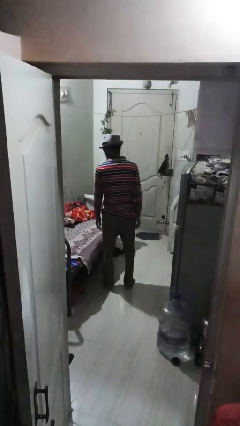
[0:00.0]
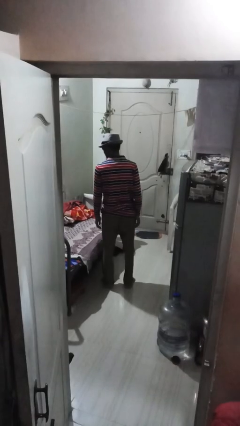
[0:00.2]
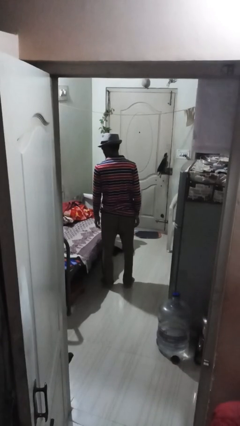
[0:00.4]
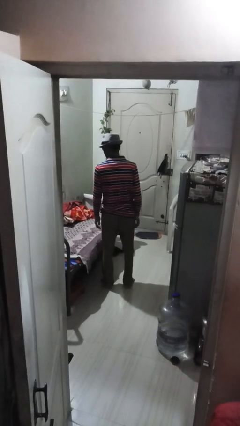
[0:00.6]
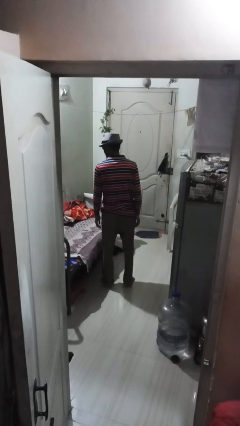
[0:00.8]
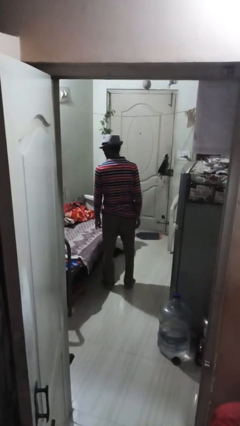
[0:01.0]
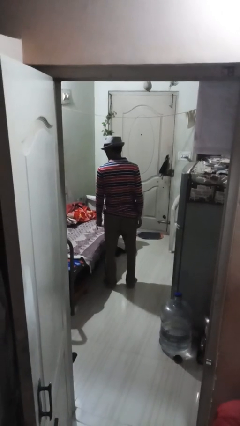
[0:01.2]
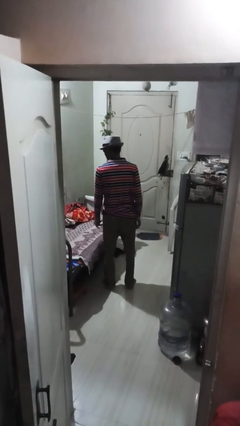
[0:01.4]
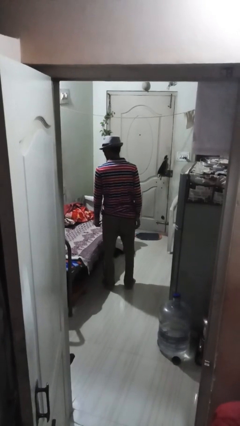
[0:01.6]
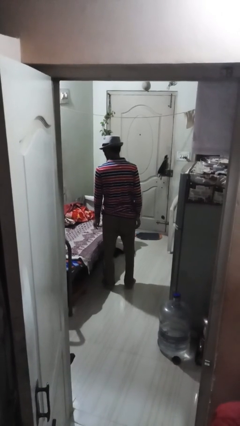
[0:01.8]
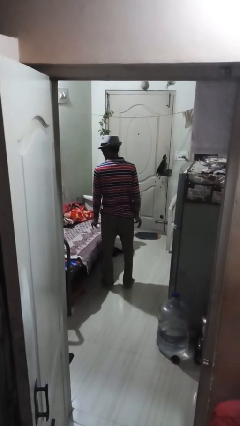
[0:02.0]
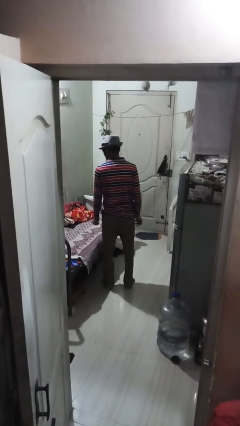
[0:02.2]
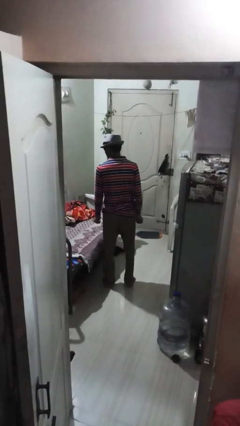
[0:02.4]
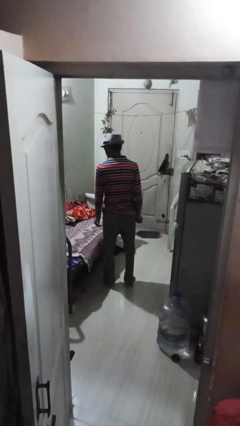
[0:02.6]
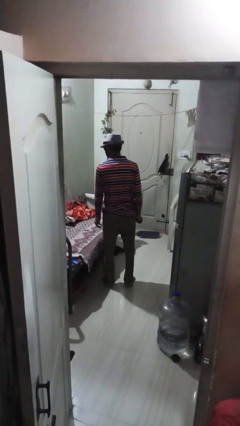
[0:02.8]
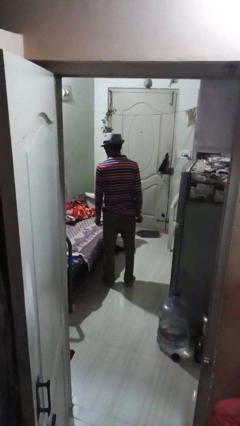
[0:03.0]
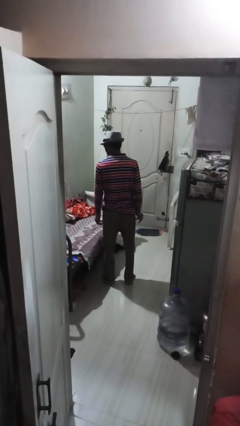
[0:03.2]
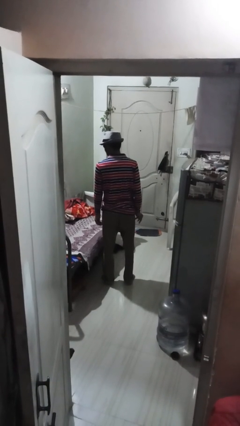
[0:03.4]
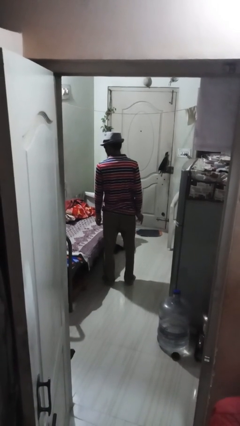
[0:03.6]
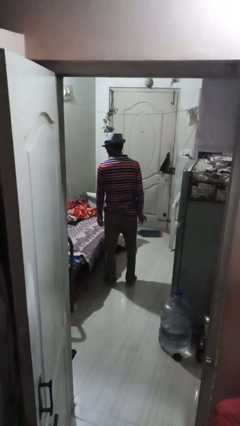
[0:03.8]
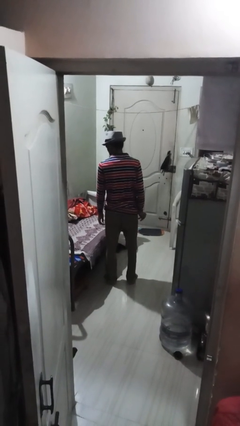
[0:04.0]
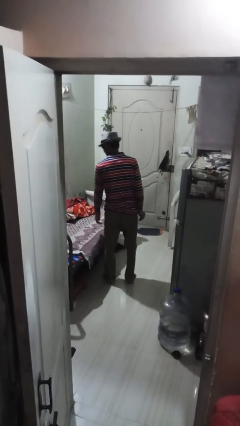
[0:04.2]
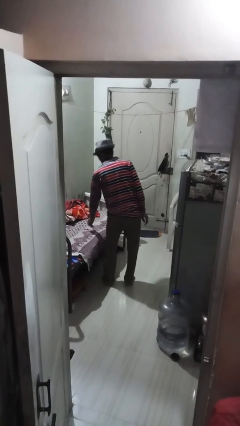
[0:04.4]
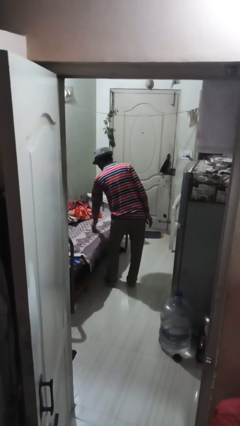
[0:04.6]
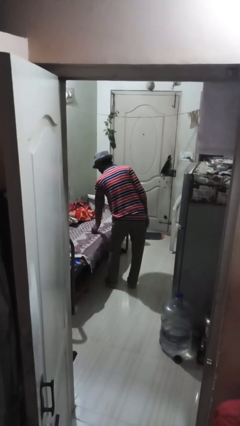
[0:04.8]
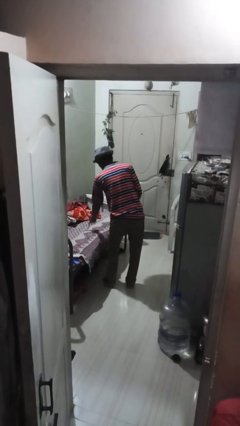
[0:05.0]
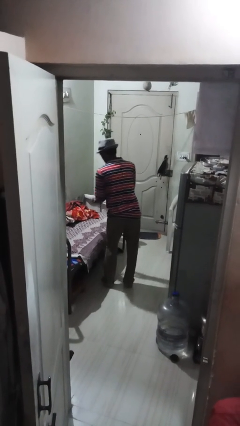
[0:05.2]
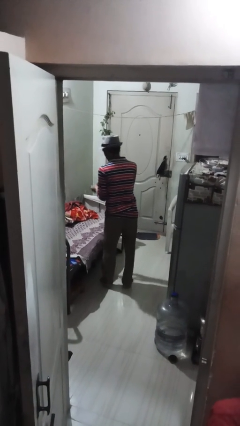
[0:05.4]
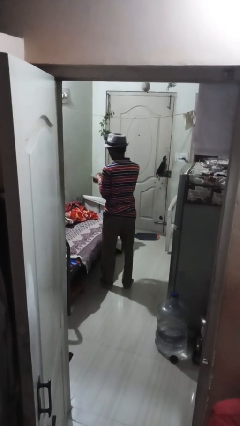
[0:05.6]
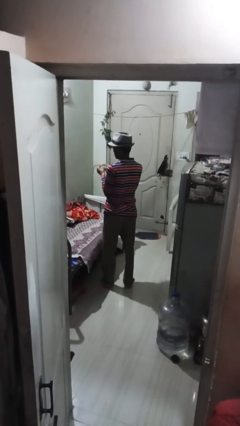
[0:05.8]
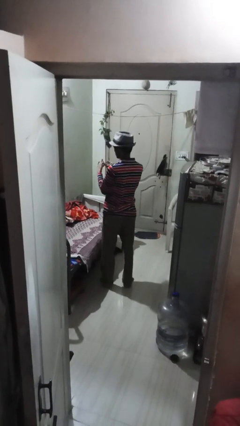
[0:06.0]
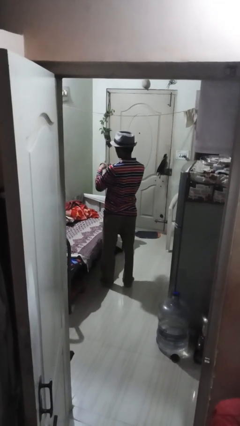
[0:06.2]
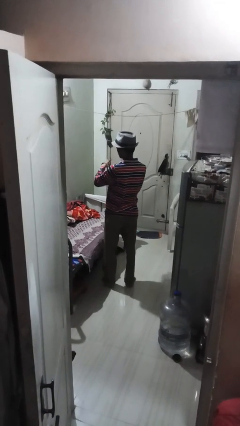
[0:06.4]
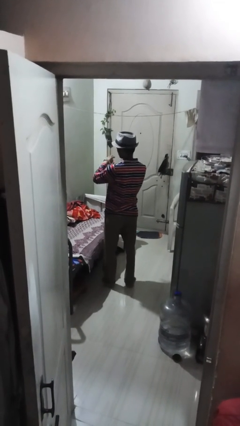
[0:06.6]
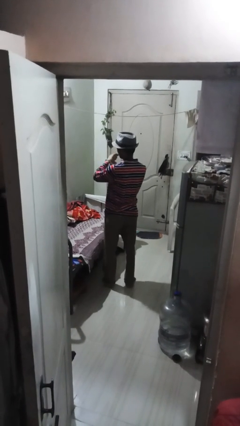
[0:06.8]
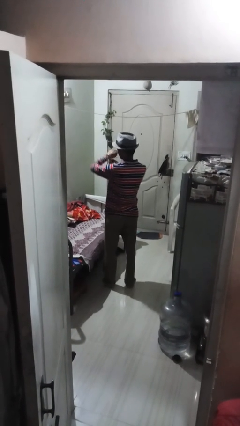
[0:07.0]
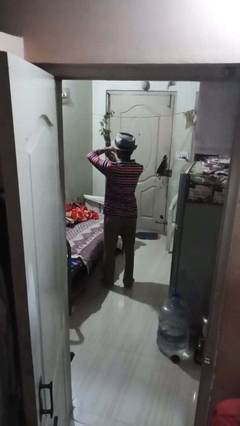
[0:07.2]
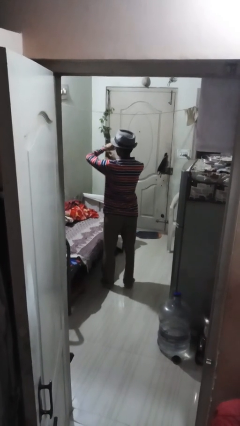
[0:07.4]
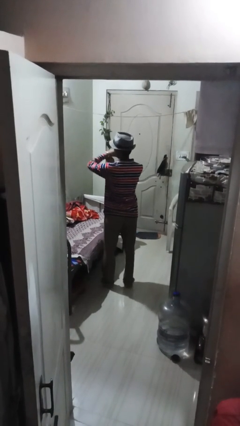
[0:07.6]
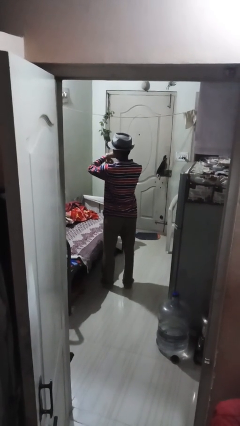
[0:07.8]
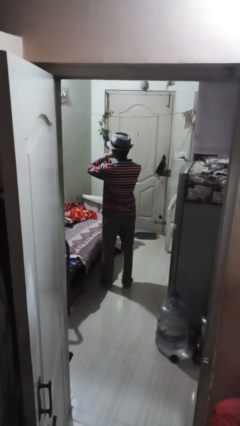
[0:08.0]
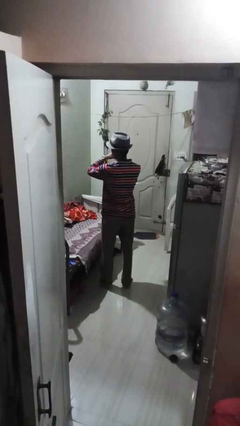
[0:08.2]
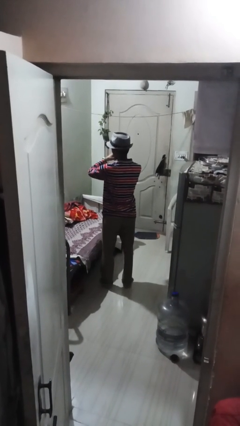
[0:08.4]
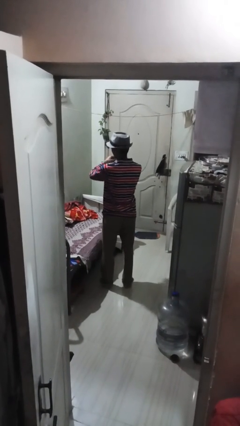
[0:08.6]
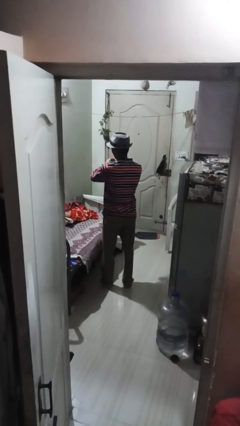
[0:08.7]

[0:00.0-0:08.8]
person puts on wristwatch

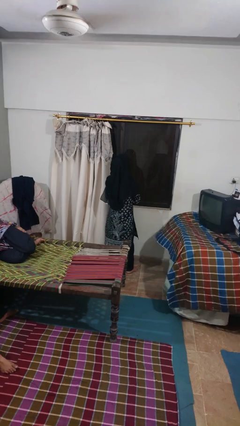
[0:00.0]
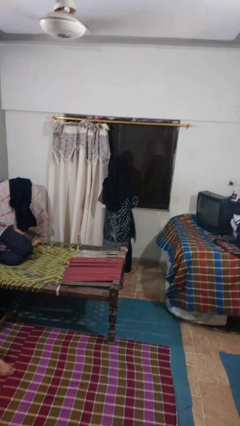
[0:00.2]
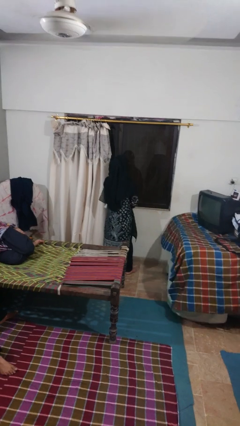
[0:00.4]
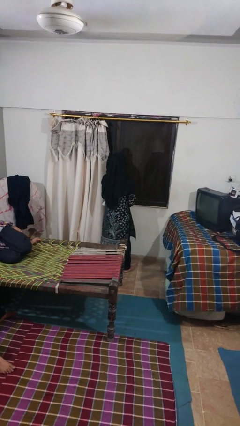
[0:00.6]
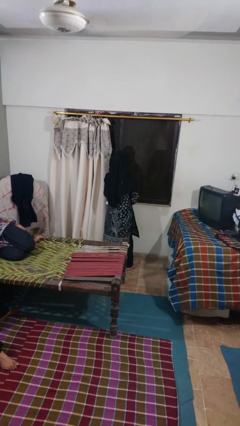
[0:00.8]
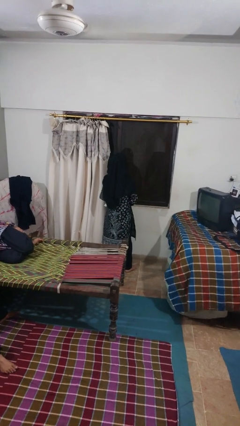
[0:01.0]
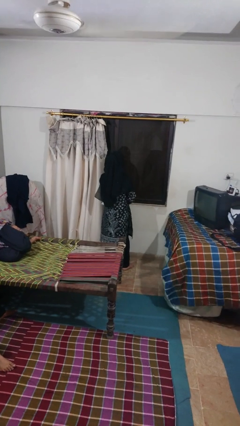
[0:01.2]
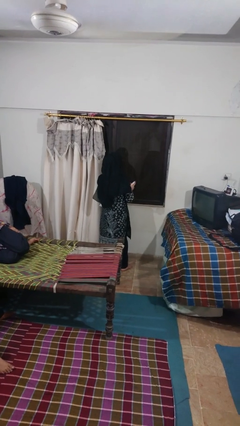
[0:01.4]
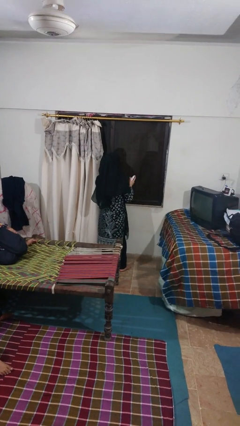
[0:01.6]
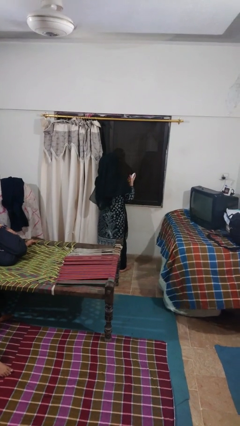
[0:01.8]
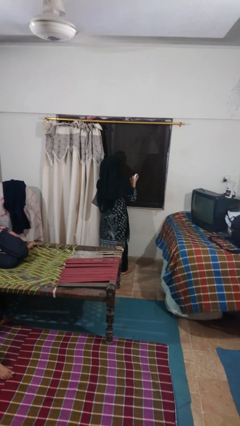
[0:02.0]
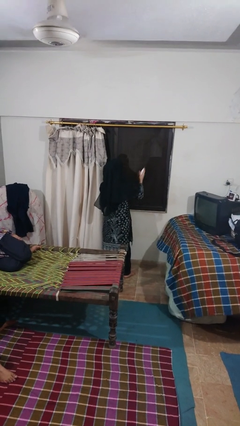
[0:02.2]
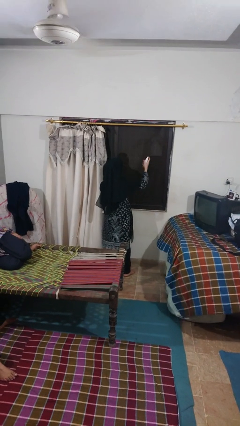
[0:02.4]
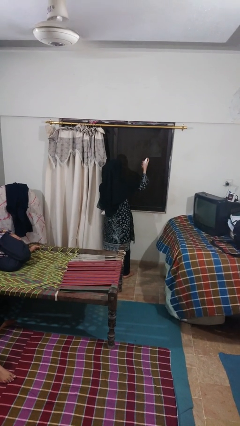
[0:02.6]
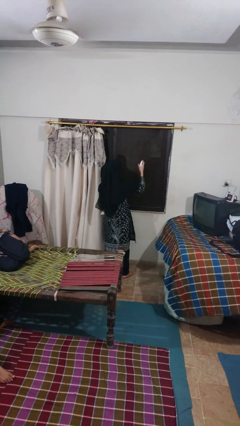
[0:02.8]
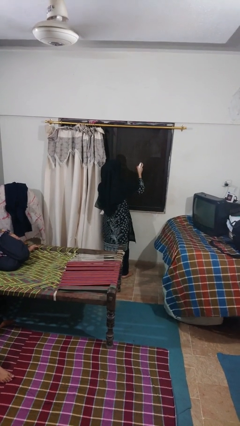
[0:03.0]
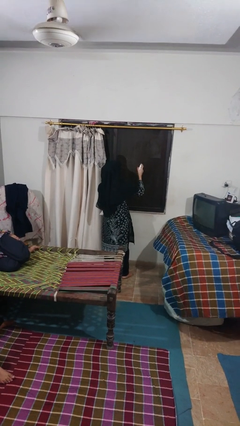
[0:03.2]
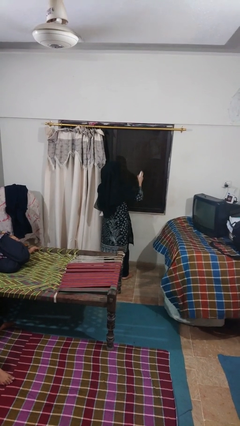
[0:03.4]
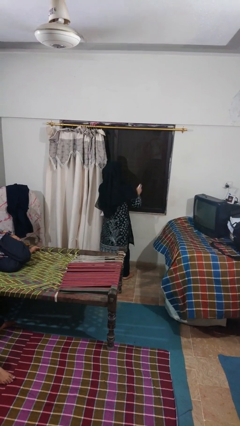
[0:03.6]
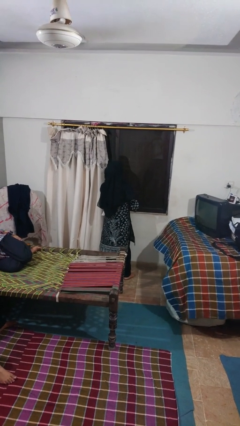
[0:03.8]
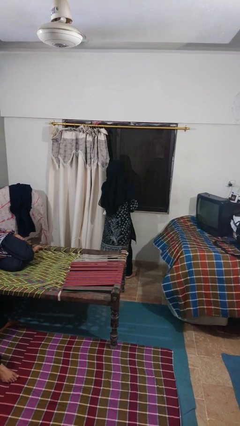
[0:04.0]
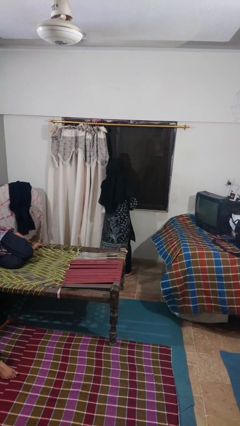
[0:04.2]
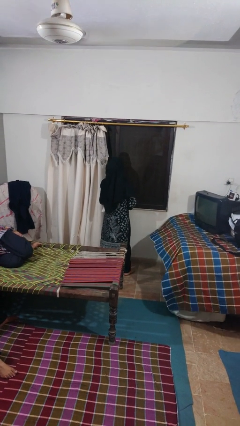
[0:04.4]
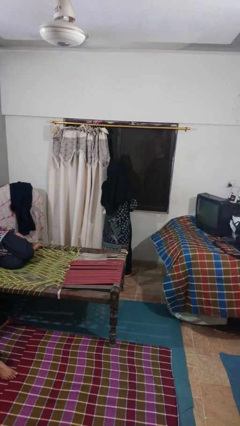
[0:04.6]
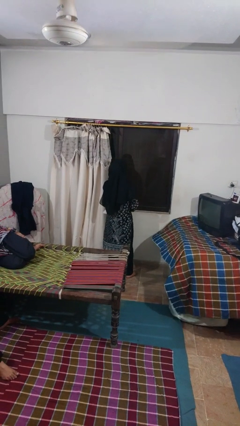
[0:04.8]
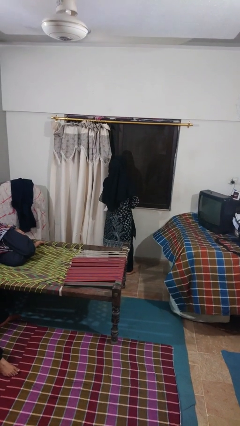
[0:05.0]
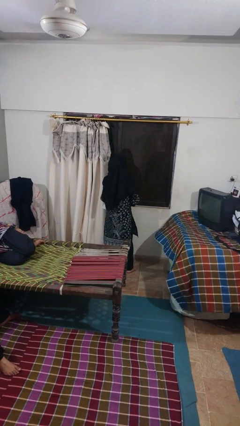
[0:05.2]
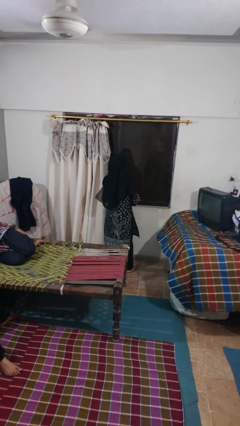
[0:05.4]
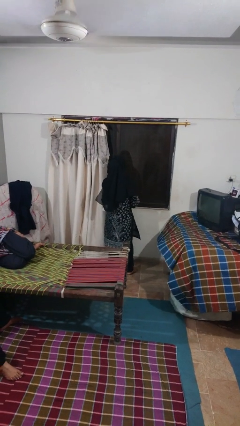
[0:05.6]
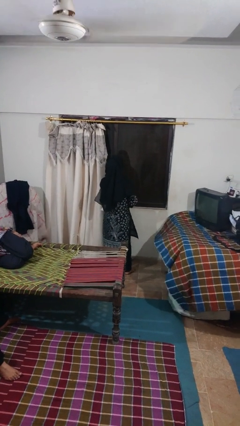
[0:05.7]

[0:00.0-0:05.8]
person sprays from bottle

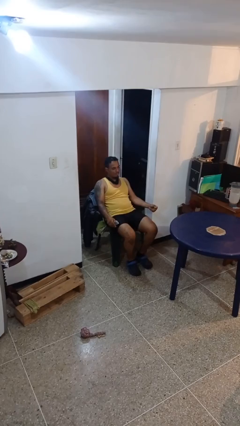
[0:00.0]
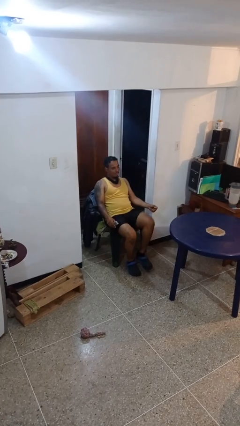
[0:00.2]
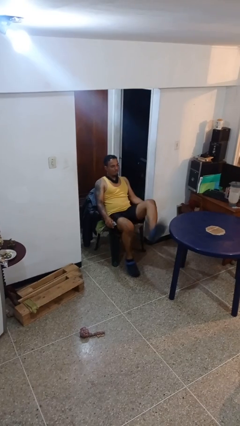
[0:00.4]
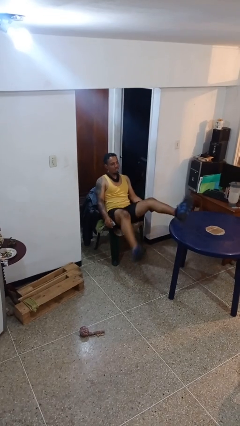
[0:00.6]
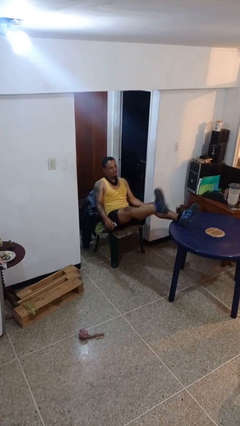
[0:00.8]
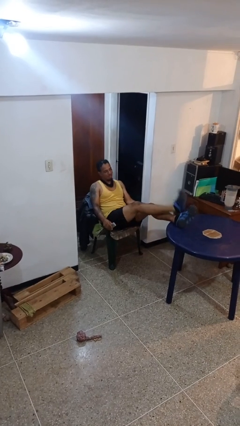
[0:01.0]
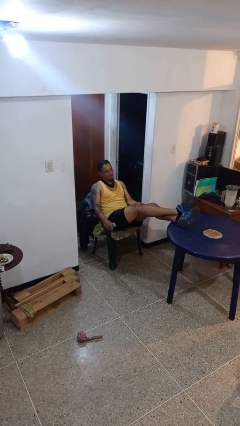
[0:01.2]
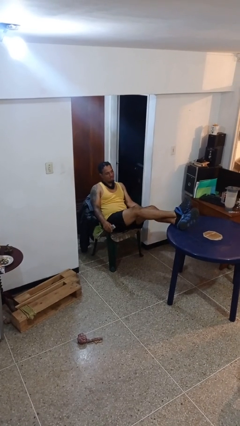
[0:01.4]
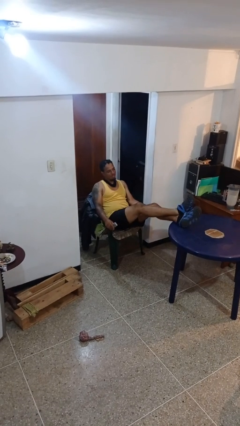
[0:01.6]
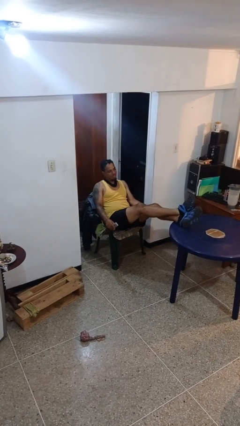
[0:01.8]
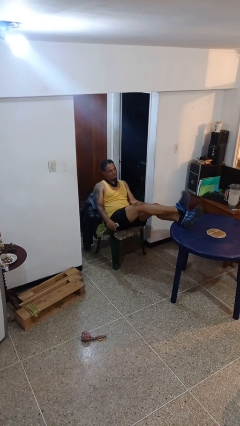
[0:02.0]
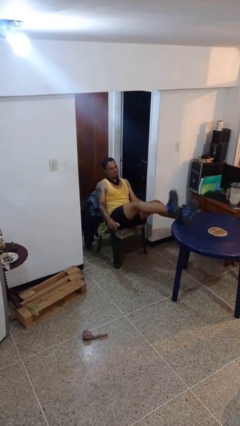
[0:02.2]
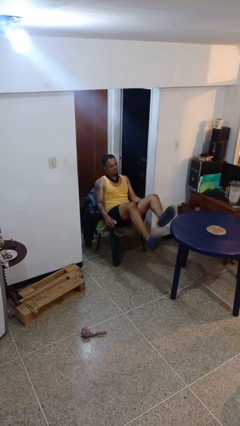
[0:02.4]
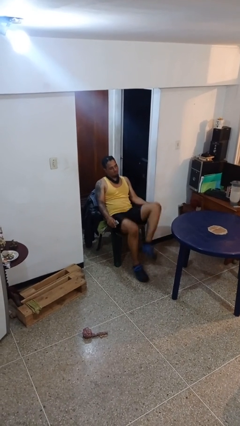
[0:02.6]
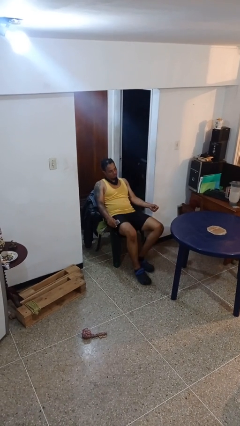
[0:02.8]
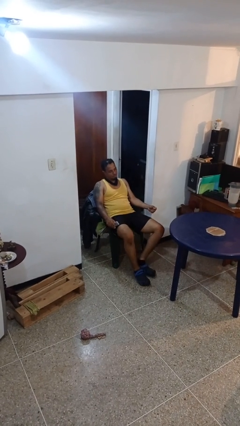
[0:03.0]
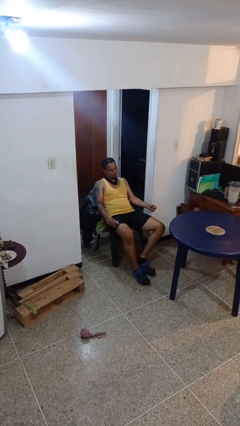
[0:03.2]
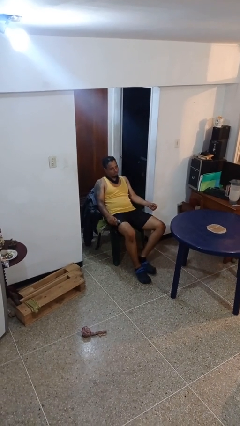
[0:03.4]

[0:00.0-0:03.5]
person puts feet up
